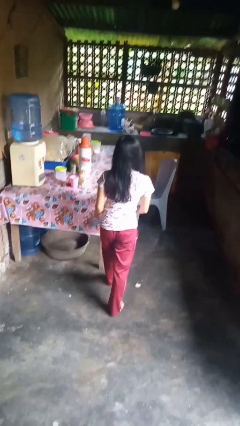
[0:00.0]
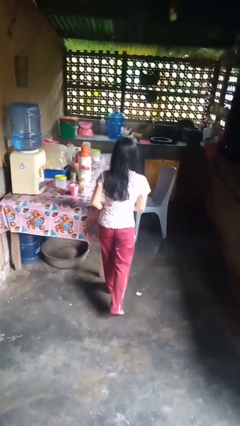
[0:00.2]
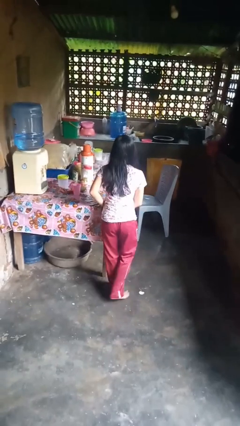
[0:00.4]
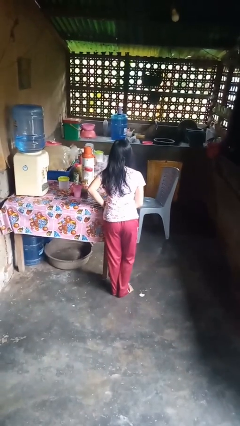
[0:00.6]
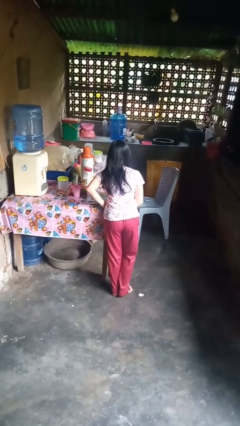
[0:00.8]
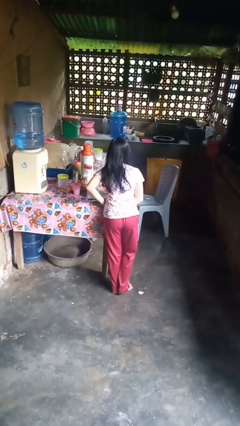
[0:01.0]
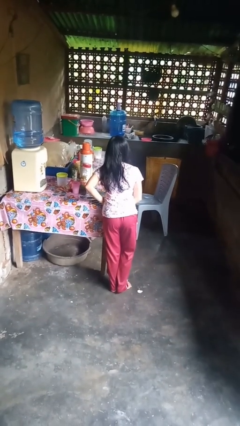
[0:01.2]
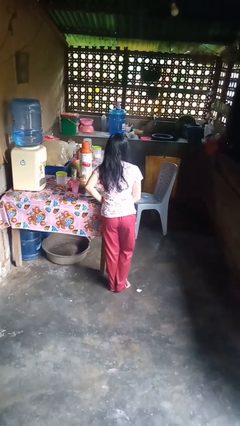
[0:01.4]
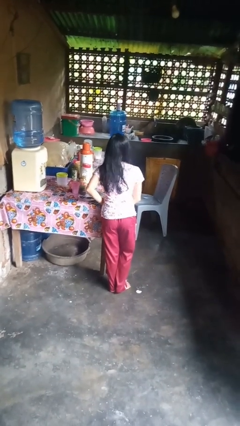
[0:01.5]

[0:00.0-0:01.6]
person bumps into table

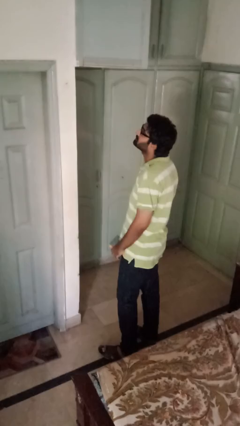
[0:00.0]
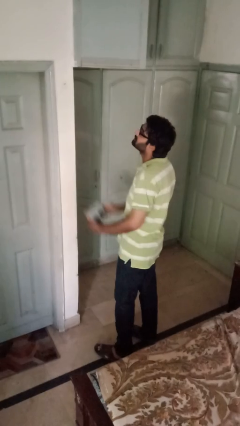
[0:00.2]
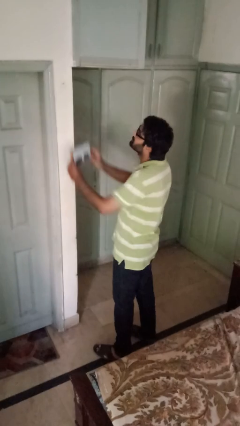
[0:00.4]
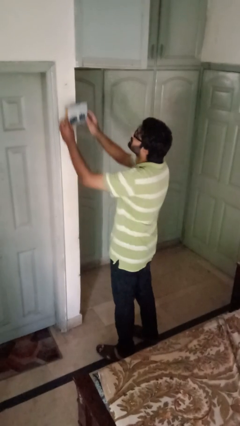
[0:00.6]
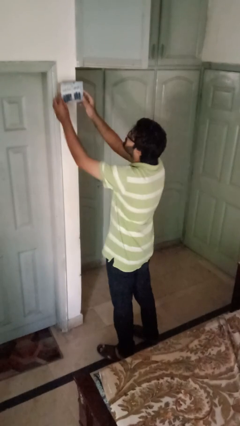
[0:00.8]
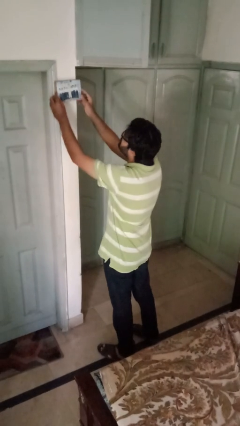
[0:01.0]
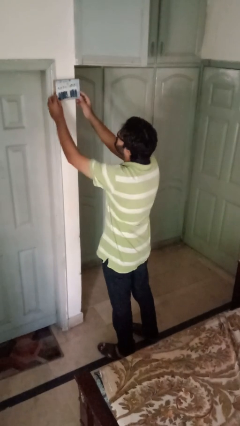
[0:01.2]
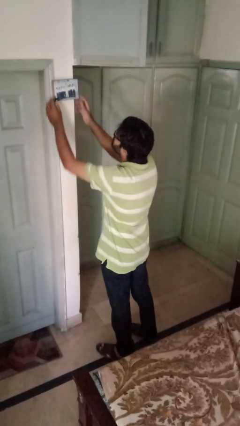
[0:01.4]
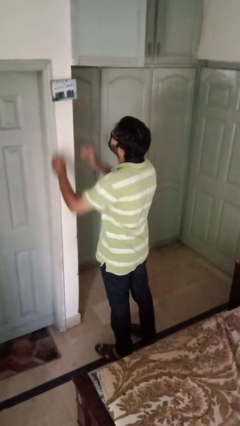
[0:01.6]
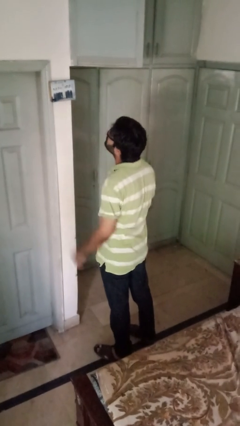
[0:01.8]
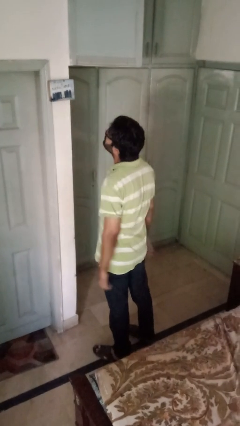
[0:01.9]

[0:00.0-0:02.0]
person puts up picture frame

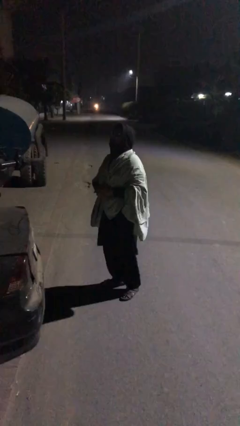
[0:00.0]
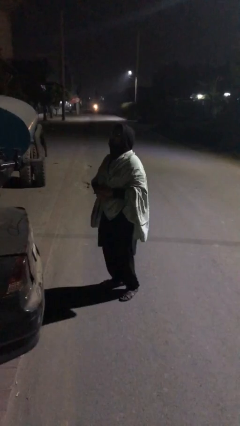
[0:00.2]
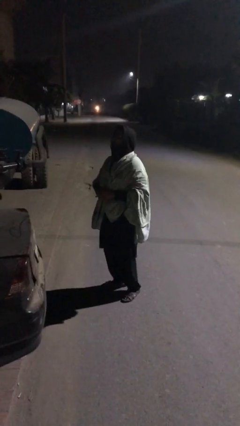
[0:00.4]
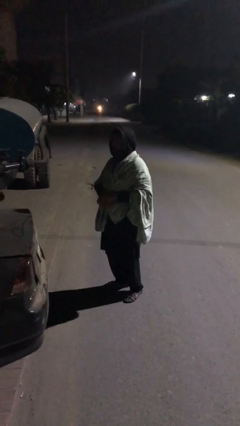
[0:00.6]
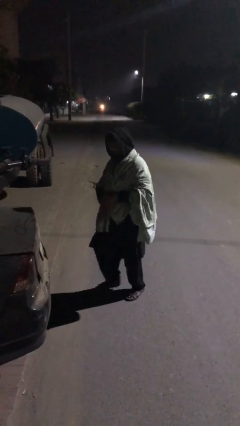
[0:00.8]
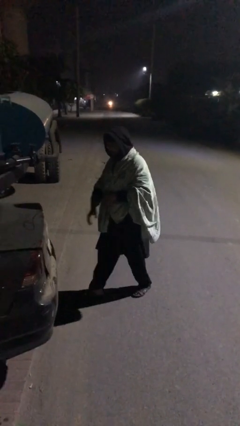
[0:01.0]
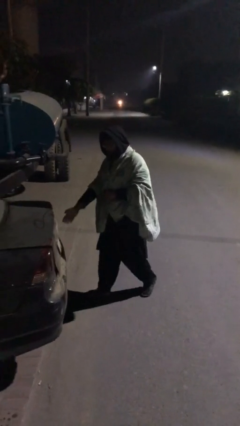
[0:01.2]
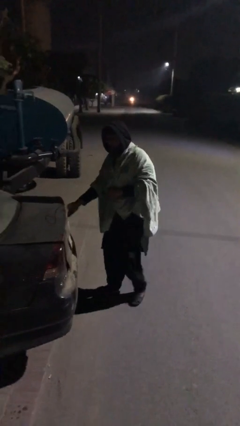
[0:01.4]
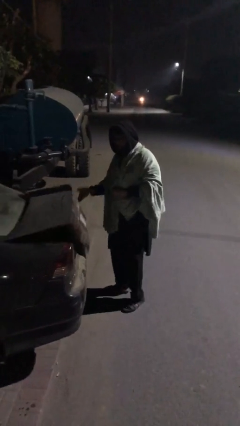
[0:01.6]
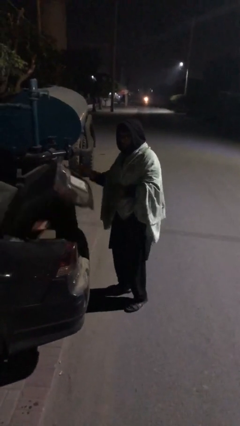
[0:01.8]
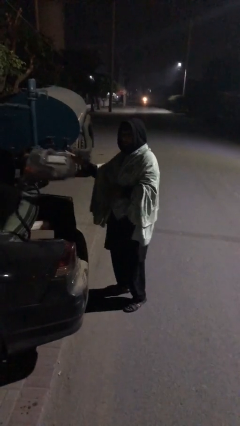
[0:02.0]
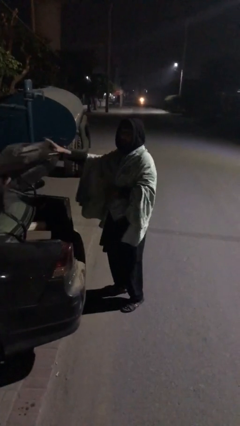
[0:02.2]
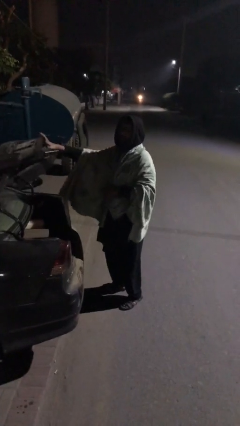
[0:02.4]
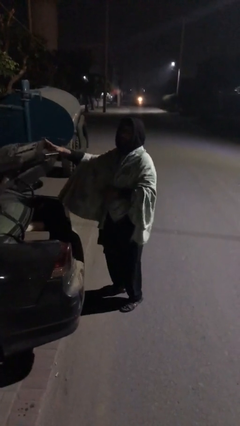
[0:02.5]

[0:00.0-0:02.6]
person opens car trunk

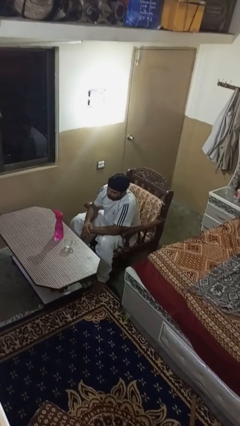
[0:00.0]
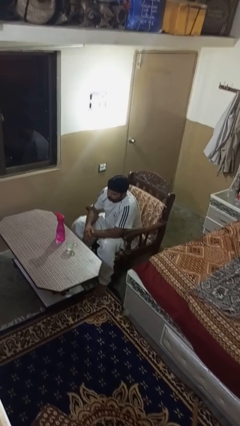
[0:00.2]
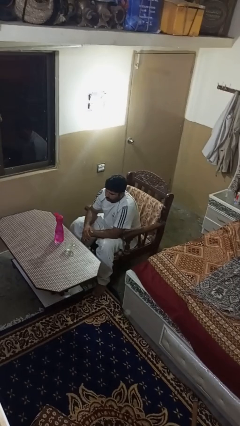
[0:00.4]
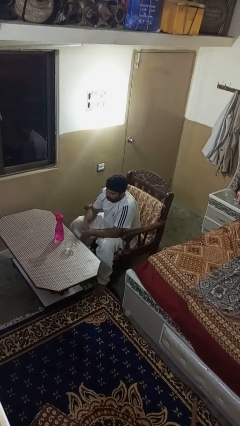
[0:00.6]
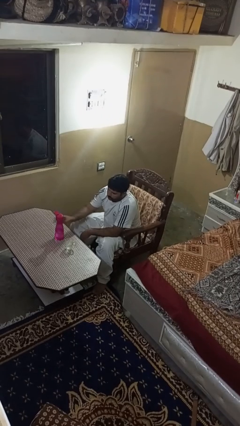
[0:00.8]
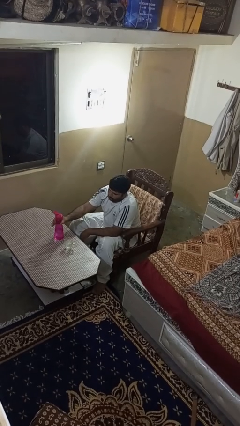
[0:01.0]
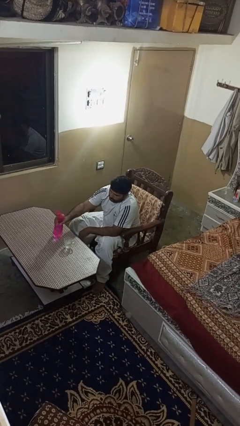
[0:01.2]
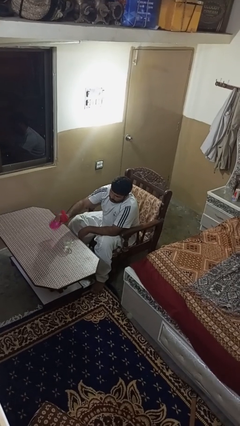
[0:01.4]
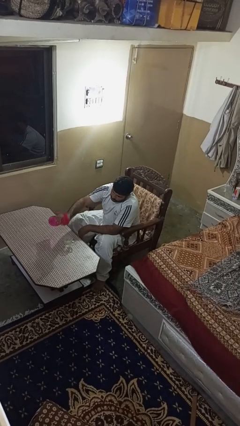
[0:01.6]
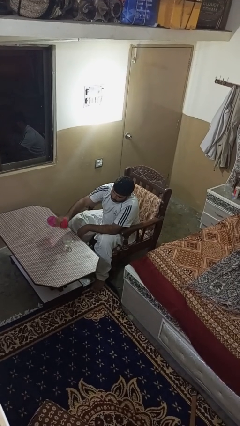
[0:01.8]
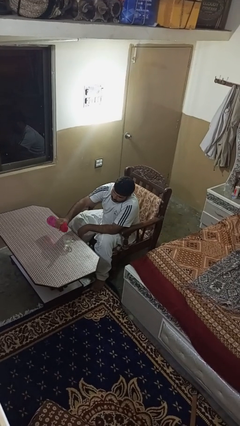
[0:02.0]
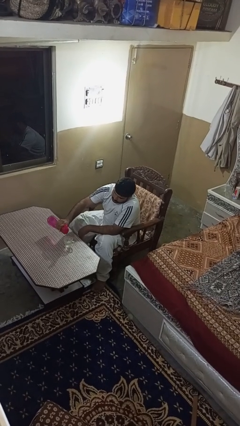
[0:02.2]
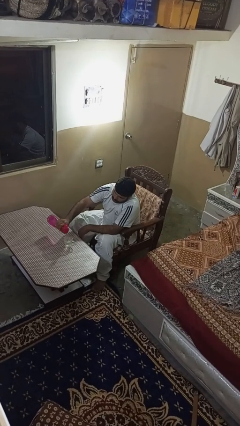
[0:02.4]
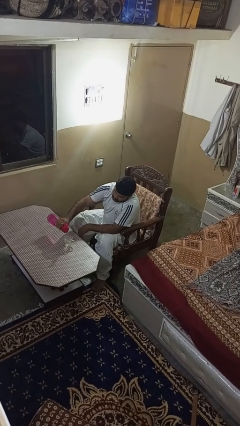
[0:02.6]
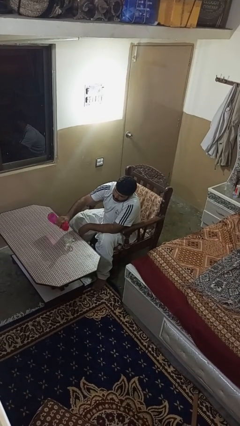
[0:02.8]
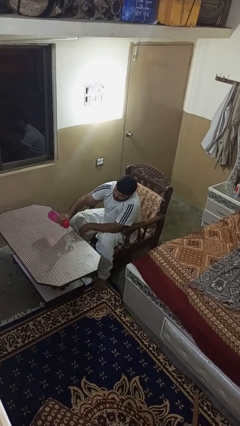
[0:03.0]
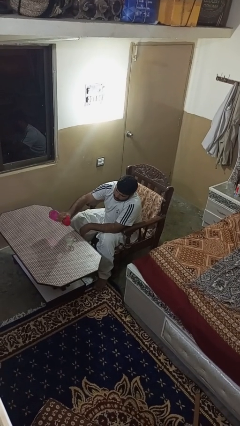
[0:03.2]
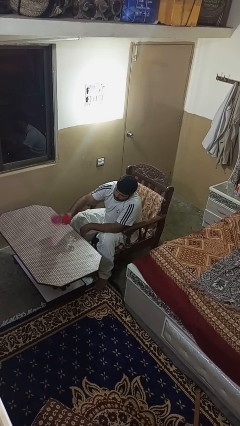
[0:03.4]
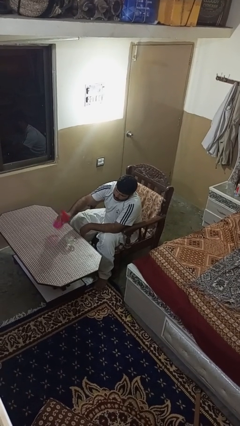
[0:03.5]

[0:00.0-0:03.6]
person pours liquid into cup

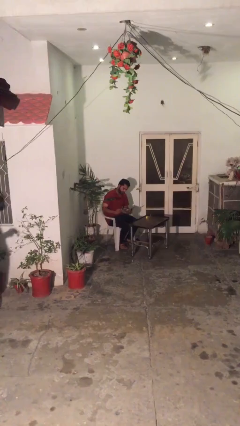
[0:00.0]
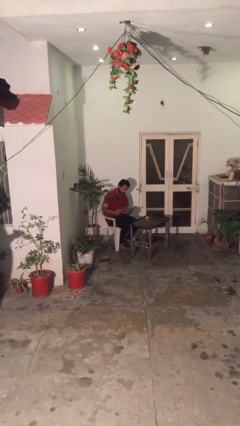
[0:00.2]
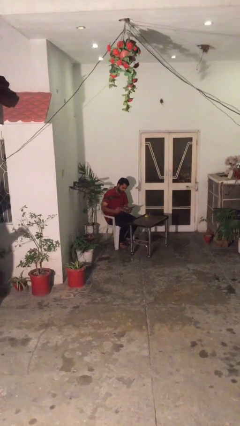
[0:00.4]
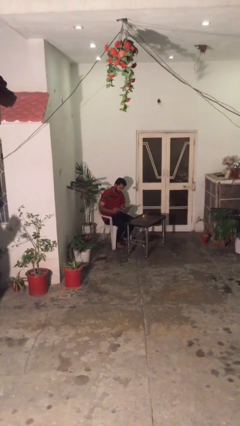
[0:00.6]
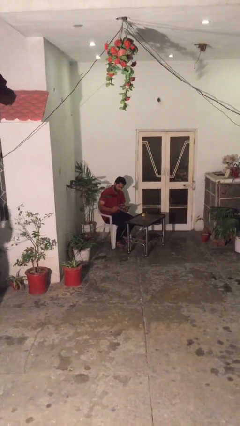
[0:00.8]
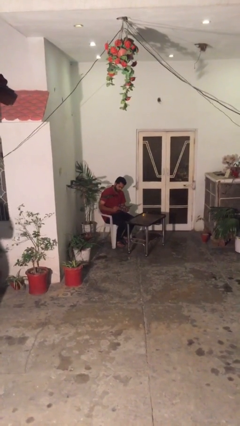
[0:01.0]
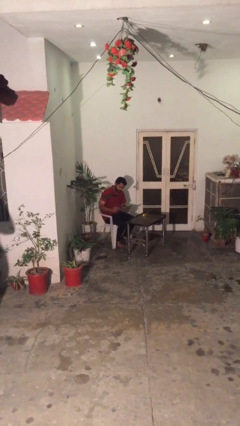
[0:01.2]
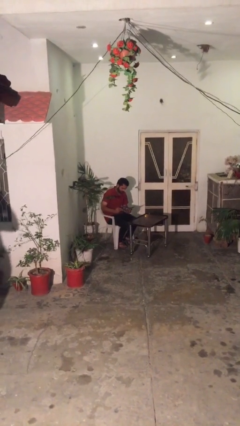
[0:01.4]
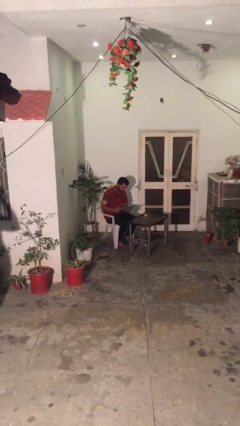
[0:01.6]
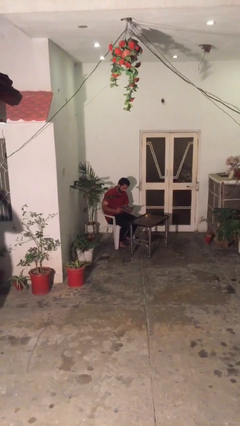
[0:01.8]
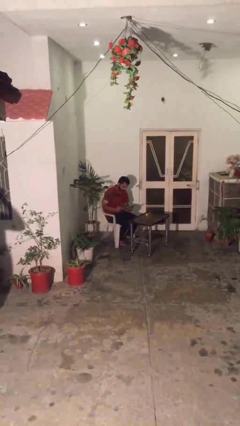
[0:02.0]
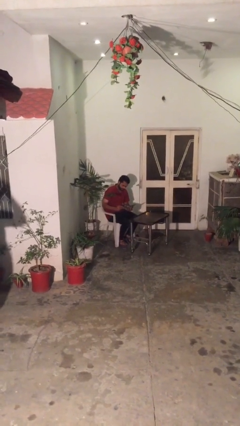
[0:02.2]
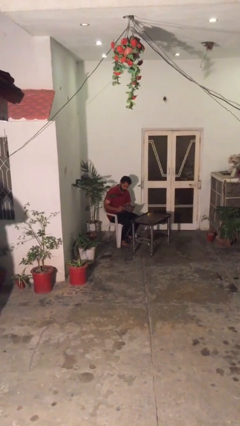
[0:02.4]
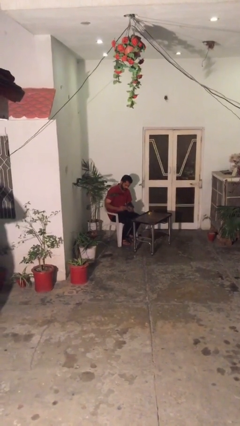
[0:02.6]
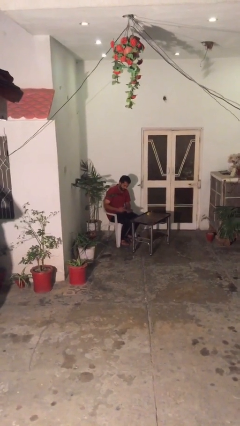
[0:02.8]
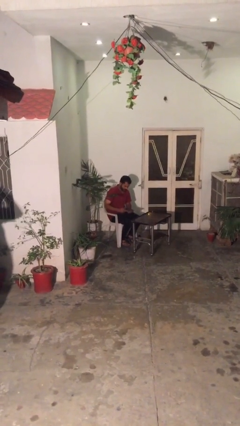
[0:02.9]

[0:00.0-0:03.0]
person reads document

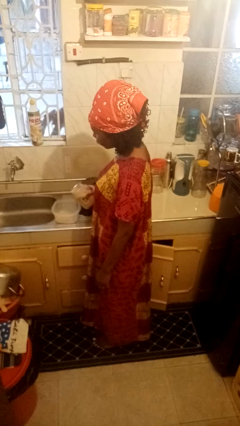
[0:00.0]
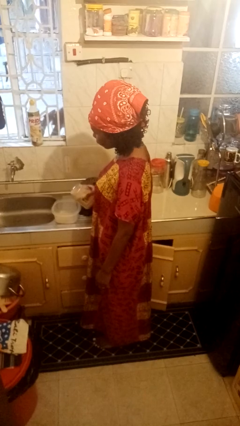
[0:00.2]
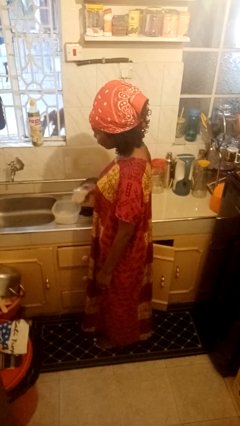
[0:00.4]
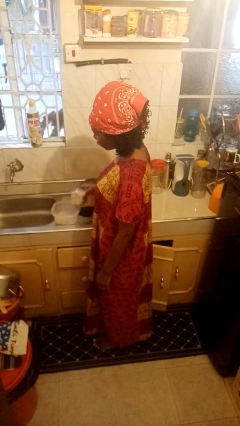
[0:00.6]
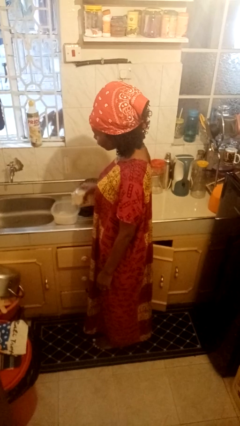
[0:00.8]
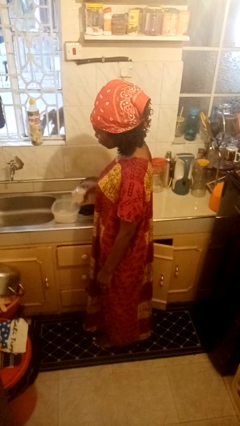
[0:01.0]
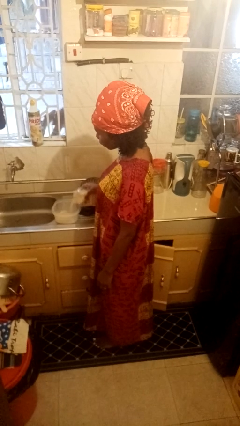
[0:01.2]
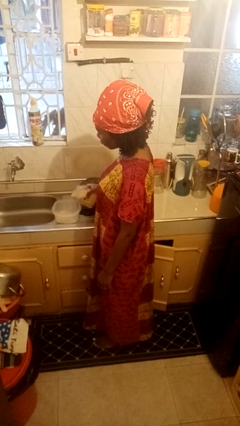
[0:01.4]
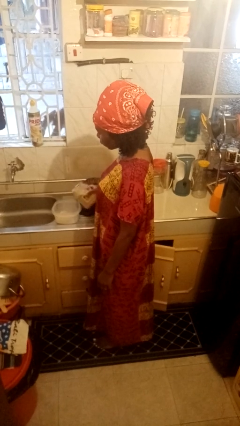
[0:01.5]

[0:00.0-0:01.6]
person pours into bowl

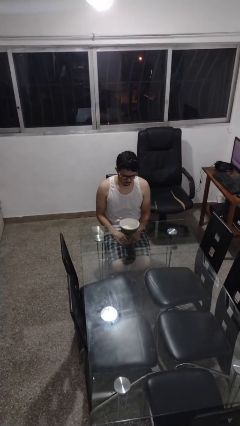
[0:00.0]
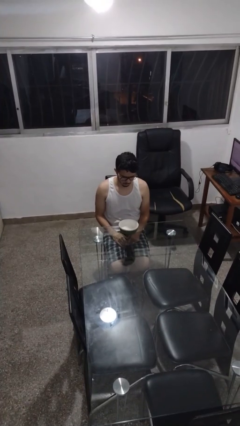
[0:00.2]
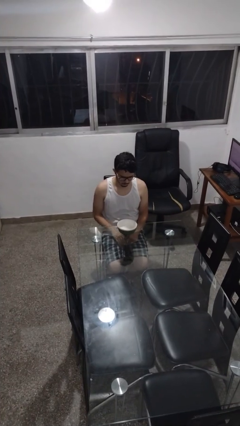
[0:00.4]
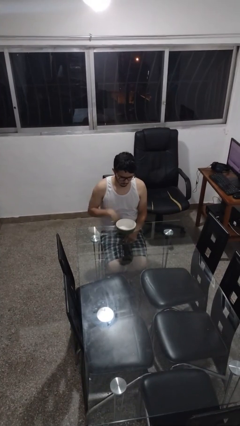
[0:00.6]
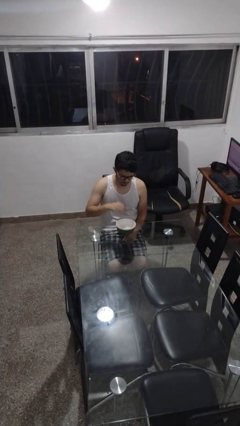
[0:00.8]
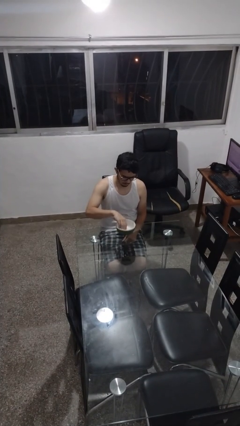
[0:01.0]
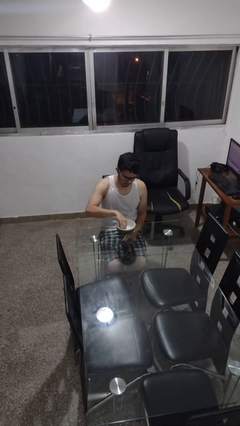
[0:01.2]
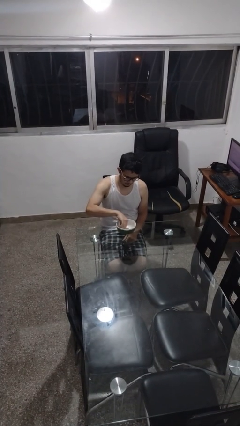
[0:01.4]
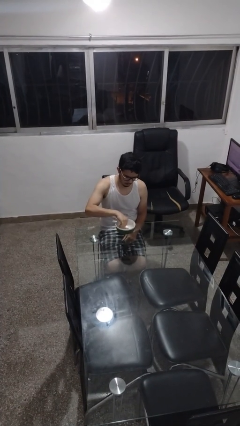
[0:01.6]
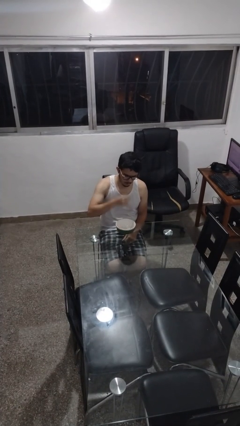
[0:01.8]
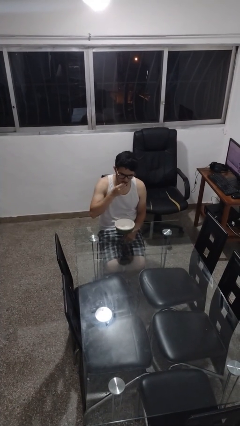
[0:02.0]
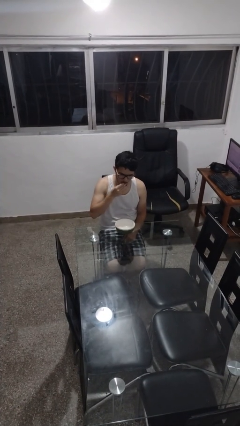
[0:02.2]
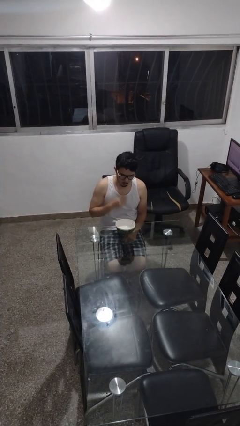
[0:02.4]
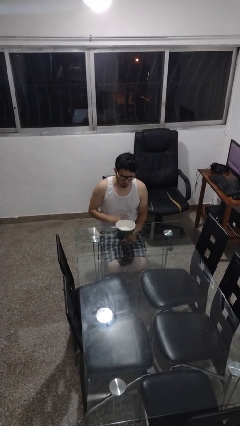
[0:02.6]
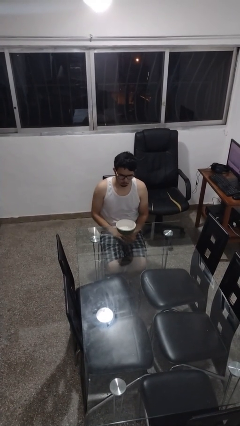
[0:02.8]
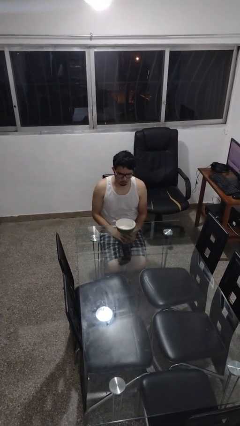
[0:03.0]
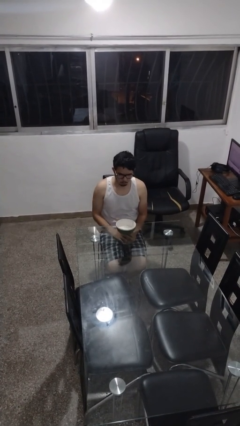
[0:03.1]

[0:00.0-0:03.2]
person eats with hands
